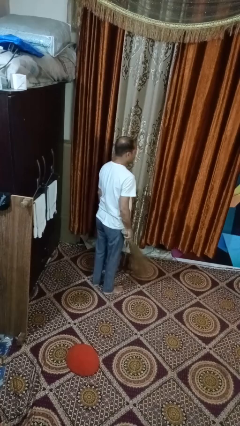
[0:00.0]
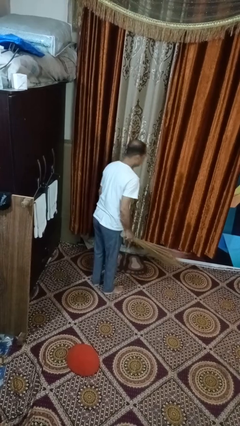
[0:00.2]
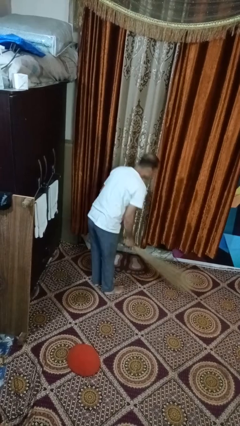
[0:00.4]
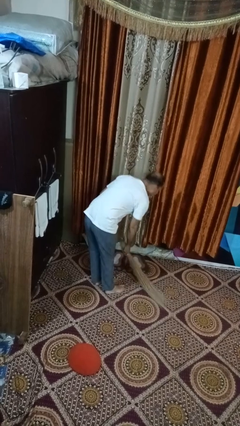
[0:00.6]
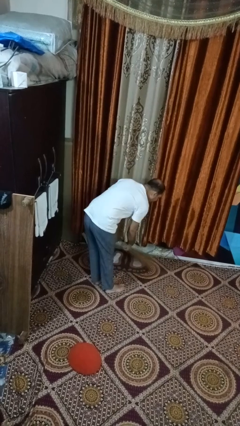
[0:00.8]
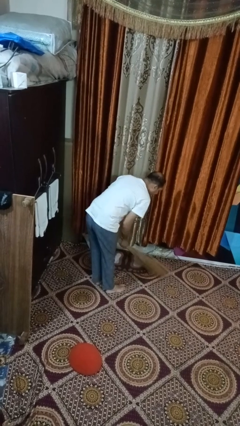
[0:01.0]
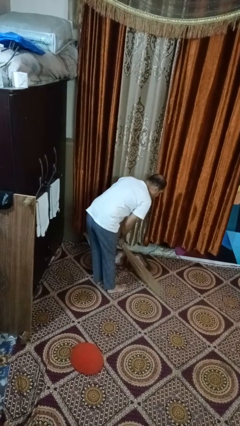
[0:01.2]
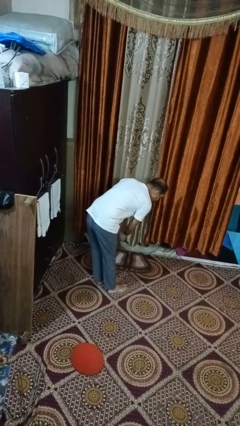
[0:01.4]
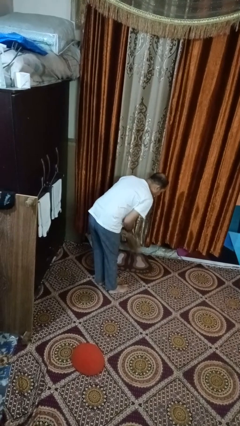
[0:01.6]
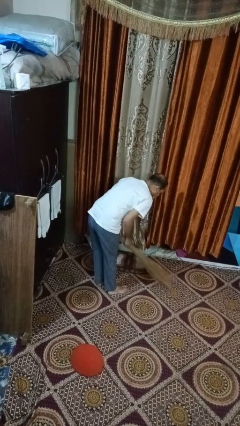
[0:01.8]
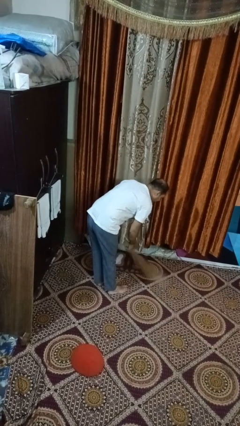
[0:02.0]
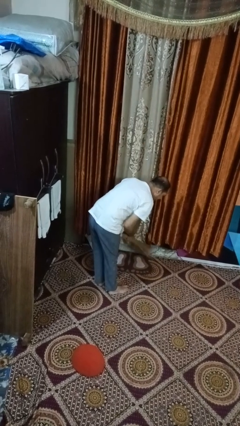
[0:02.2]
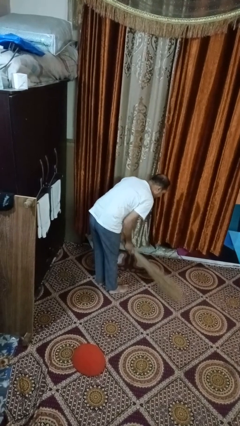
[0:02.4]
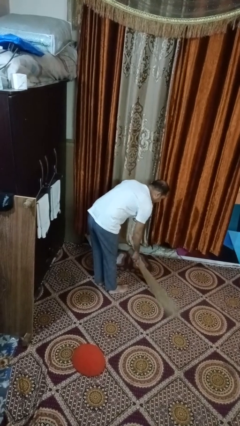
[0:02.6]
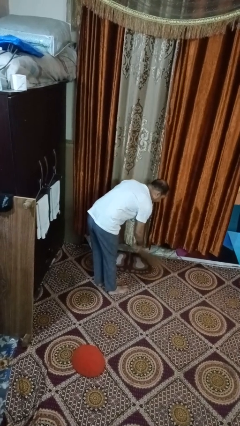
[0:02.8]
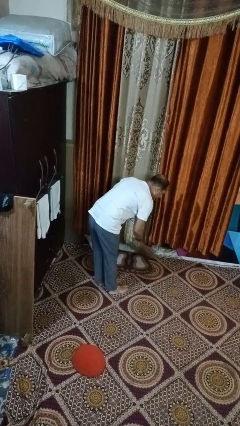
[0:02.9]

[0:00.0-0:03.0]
person sweeps floor

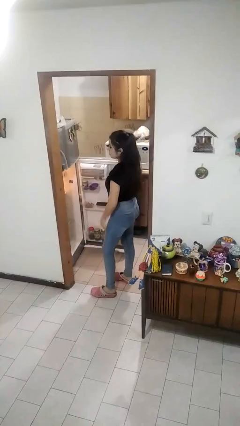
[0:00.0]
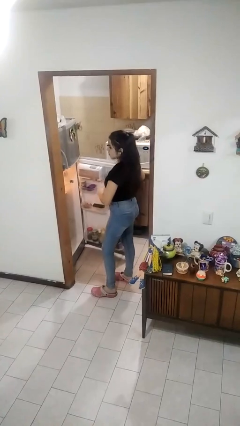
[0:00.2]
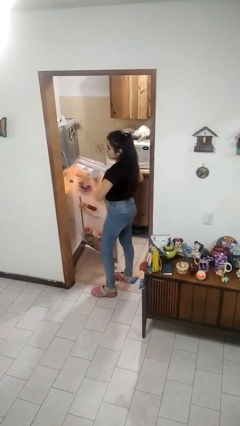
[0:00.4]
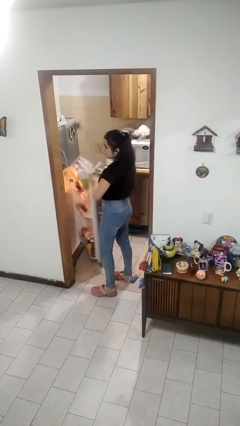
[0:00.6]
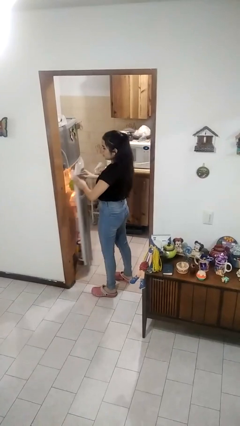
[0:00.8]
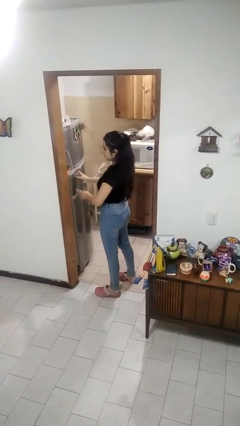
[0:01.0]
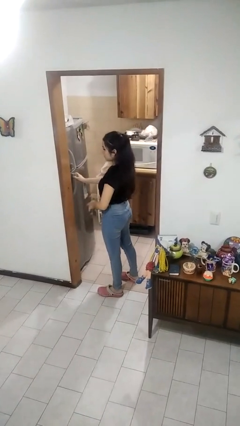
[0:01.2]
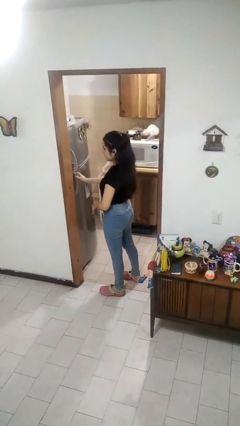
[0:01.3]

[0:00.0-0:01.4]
person closes refrigerator

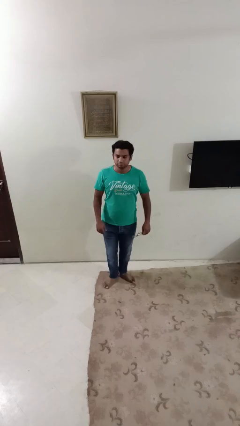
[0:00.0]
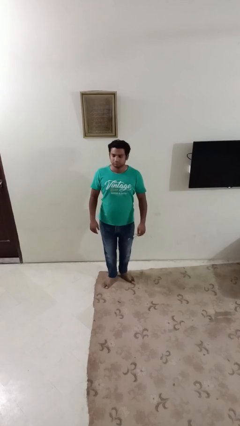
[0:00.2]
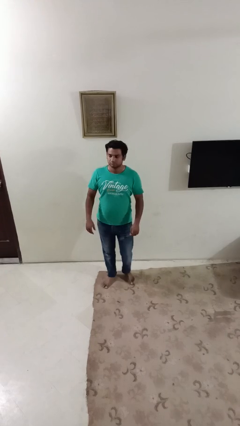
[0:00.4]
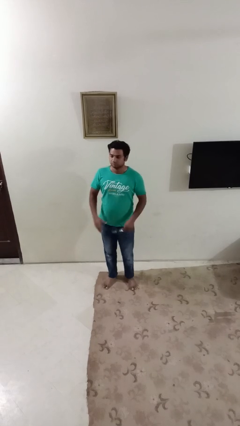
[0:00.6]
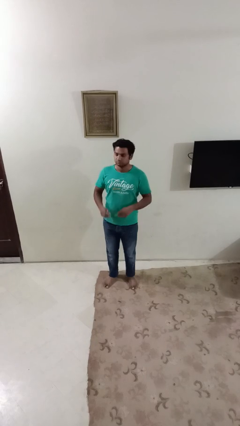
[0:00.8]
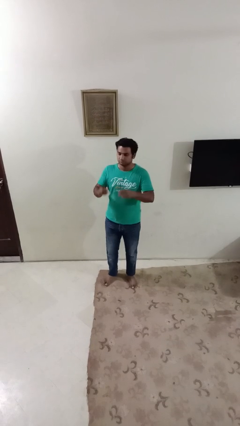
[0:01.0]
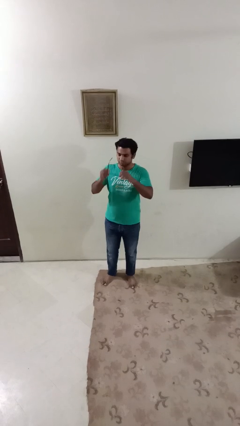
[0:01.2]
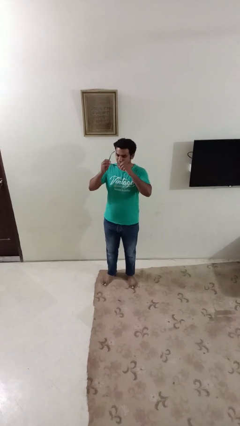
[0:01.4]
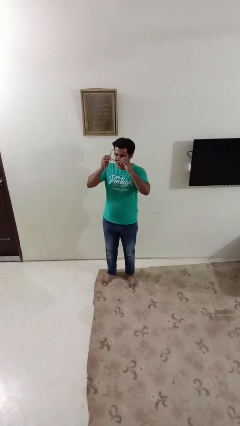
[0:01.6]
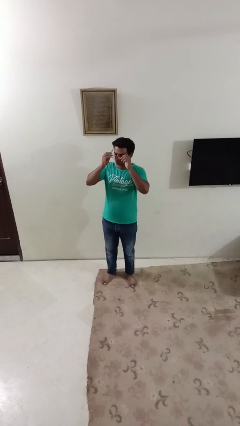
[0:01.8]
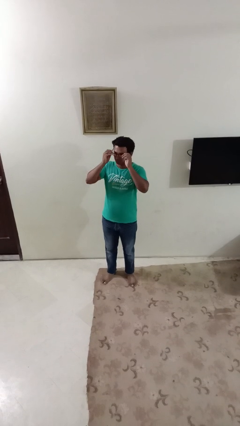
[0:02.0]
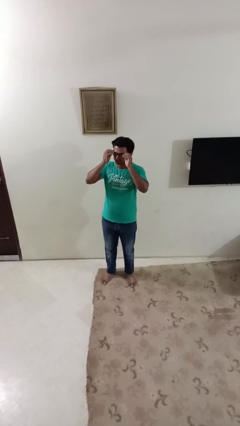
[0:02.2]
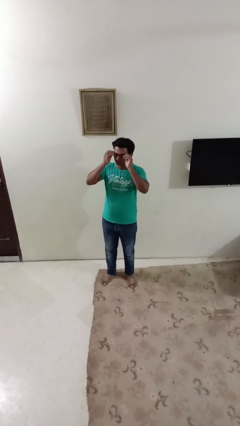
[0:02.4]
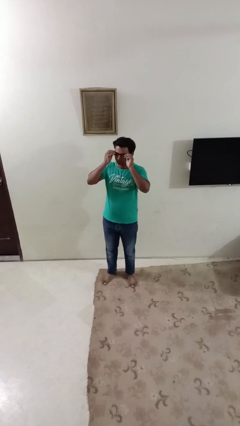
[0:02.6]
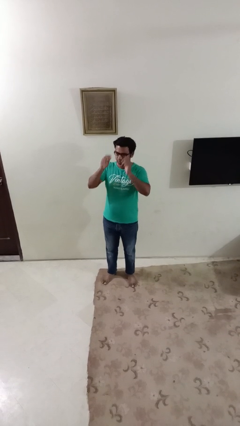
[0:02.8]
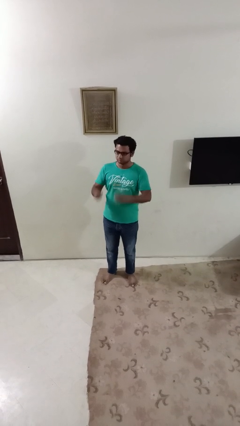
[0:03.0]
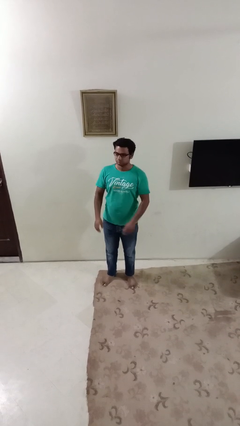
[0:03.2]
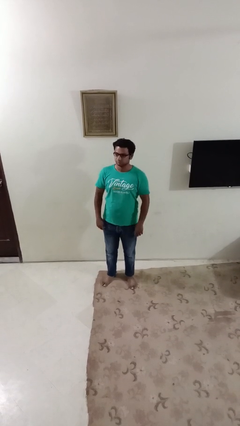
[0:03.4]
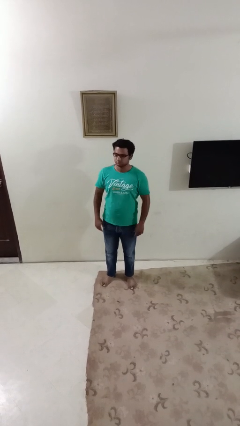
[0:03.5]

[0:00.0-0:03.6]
person puts on glasses

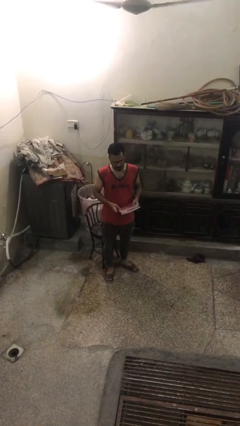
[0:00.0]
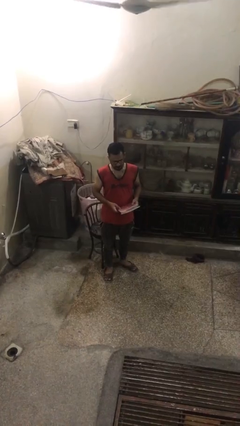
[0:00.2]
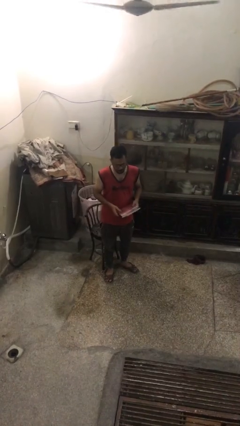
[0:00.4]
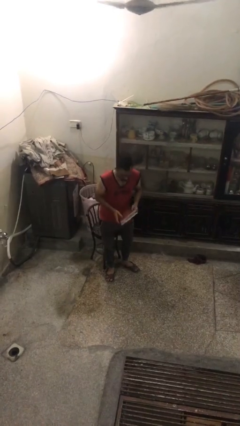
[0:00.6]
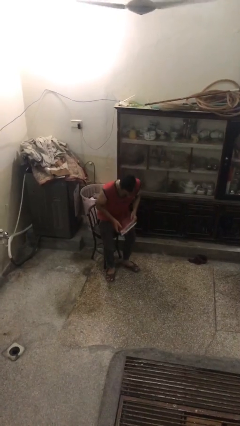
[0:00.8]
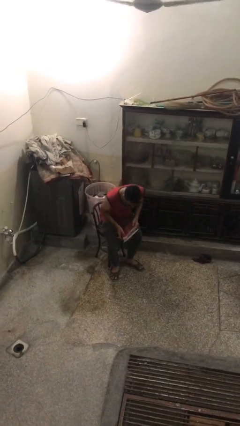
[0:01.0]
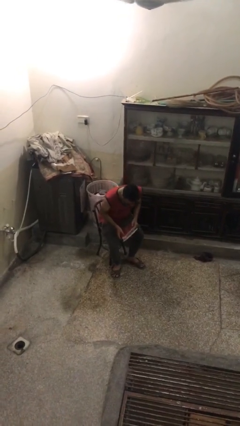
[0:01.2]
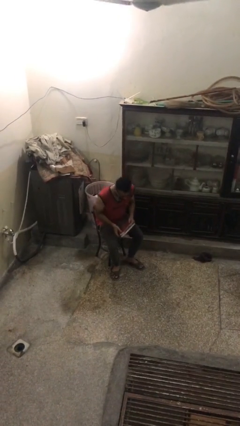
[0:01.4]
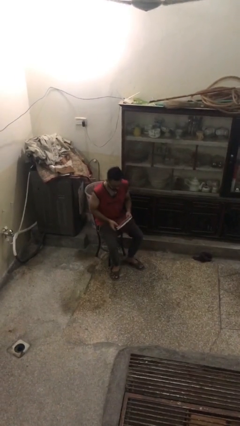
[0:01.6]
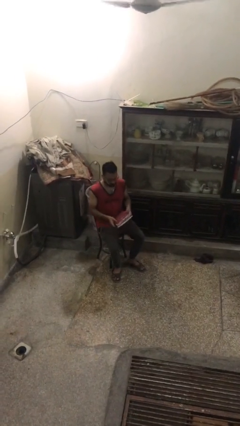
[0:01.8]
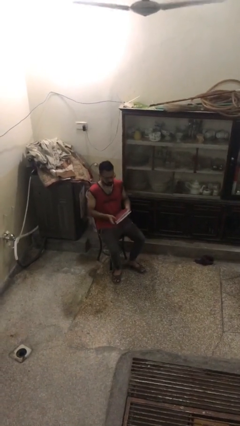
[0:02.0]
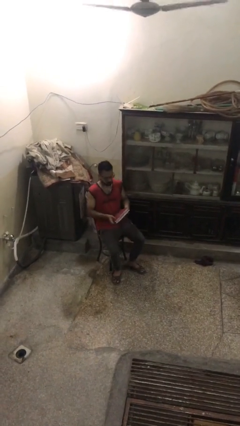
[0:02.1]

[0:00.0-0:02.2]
person sits down

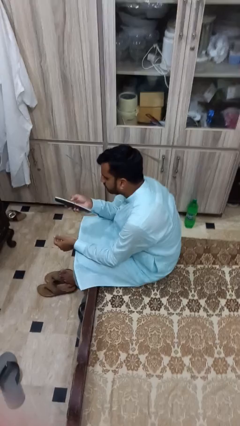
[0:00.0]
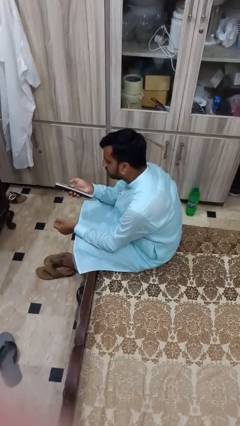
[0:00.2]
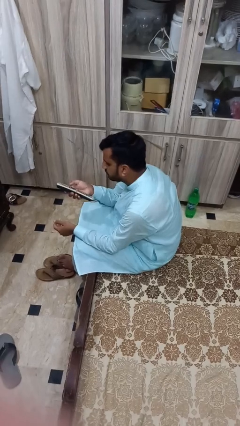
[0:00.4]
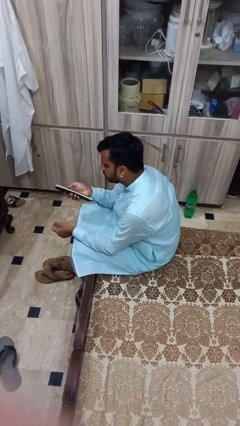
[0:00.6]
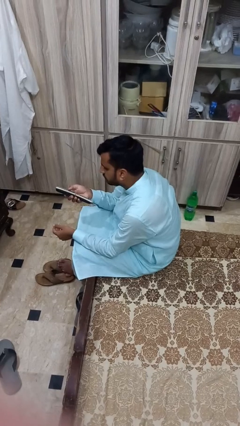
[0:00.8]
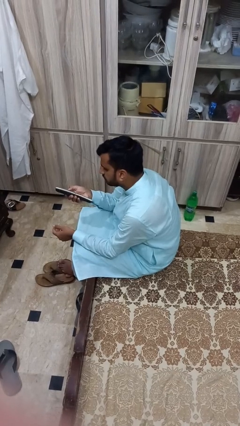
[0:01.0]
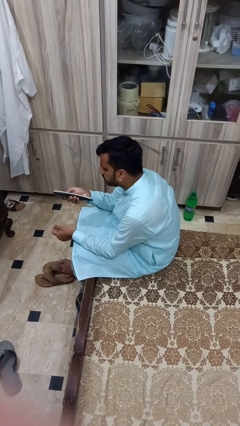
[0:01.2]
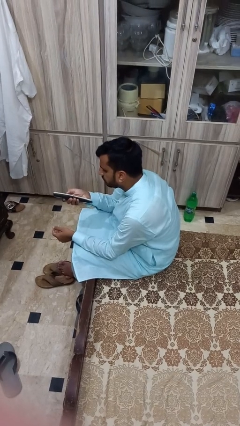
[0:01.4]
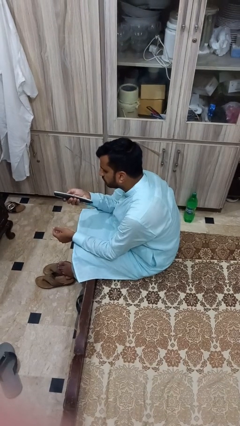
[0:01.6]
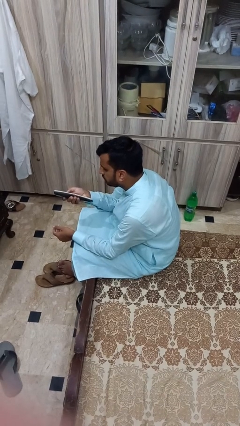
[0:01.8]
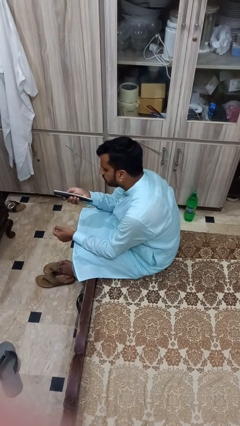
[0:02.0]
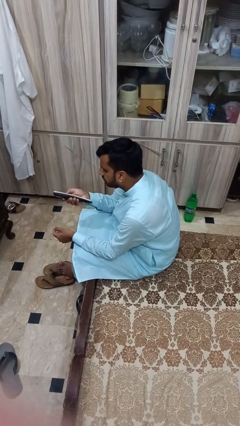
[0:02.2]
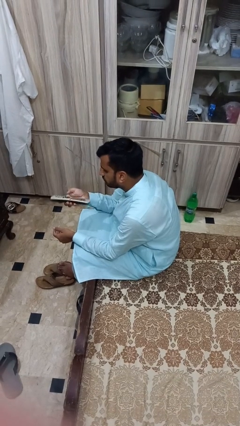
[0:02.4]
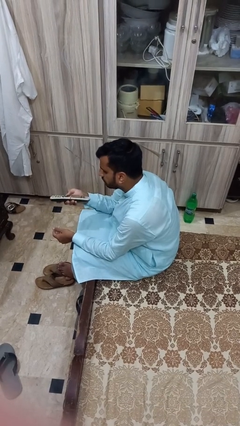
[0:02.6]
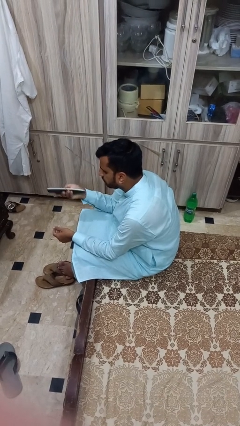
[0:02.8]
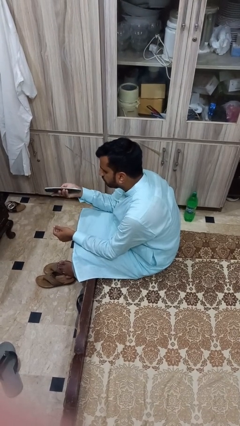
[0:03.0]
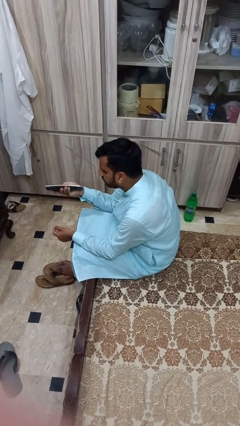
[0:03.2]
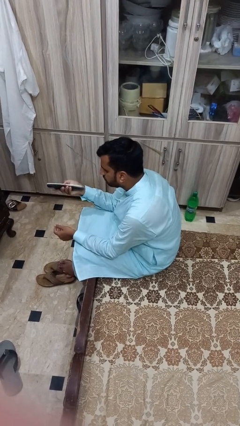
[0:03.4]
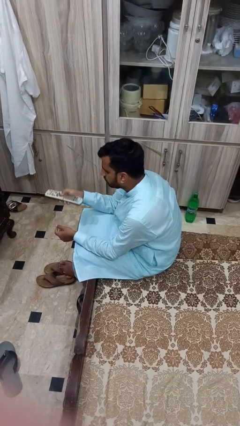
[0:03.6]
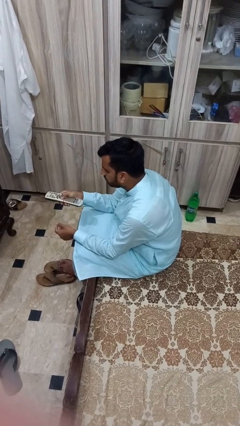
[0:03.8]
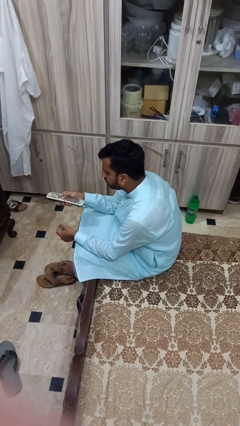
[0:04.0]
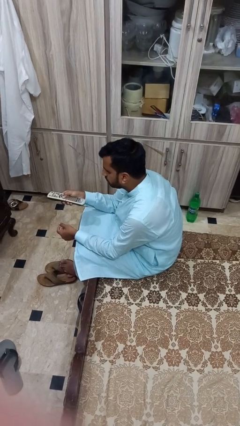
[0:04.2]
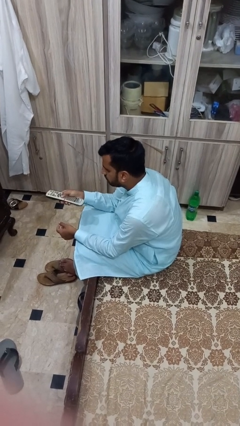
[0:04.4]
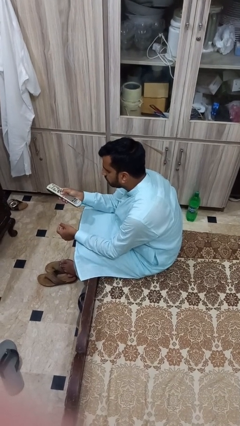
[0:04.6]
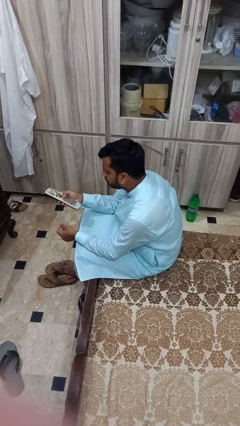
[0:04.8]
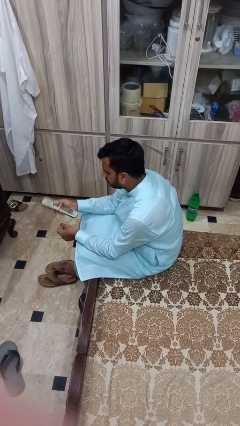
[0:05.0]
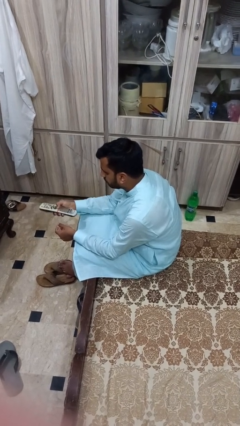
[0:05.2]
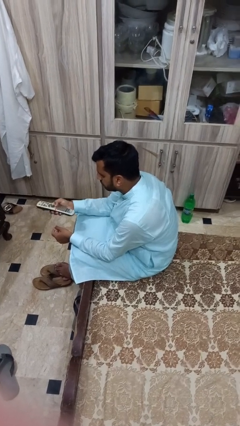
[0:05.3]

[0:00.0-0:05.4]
person uses television remote

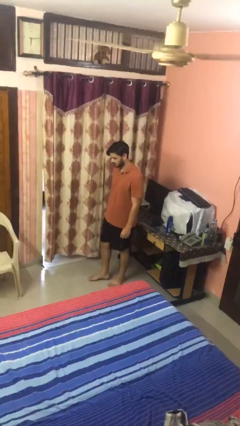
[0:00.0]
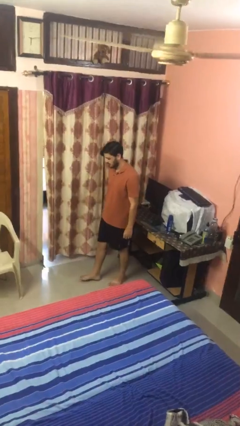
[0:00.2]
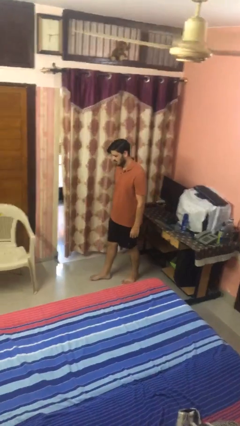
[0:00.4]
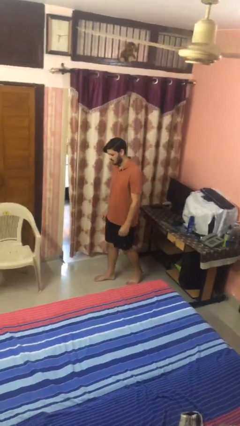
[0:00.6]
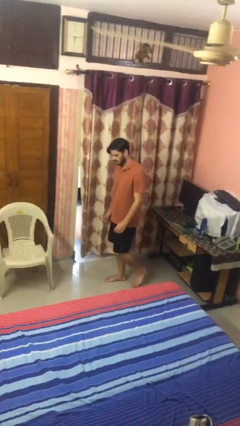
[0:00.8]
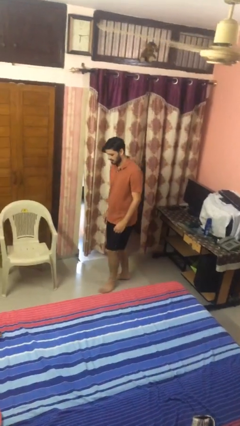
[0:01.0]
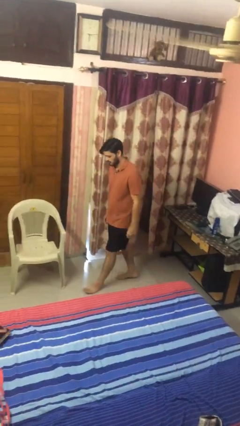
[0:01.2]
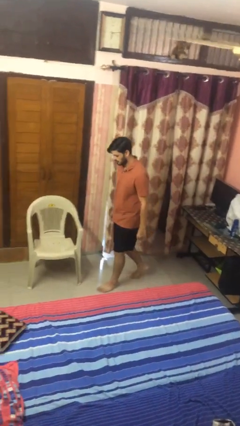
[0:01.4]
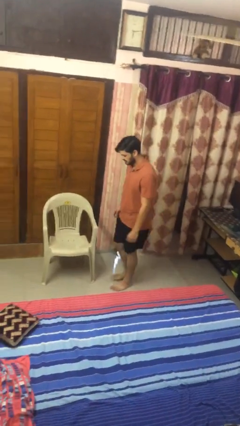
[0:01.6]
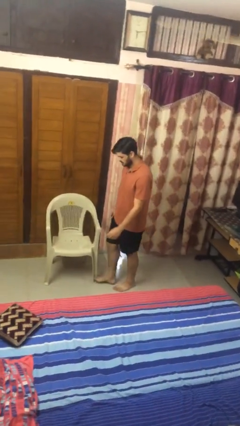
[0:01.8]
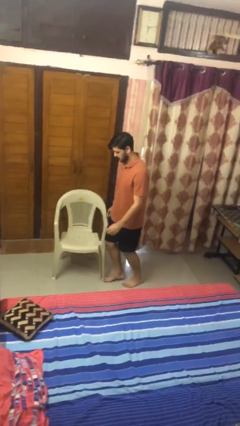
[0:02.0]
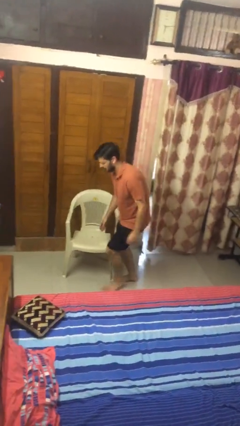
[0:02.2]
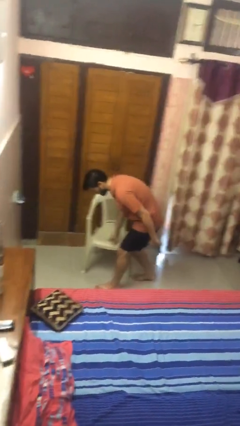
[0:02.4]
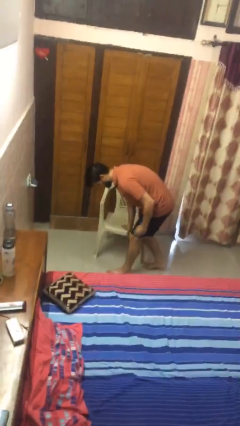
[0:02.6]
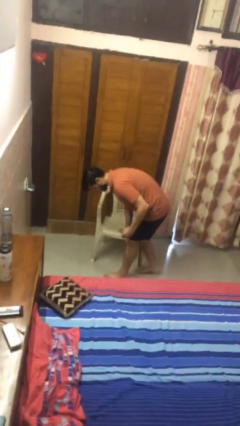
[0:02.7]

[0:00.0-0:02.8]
person stubs toe
